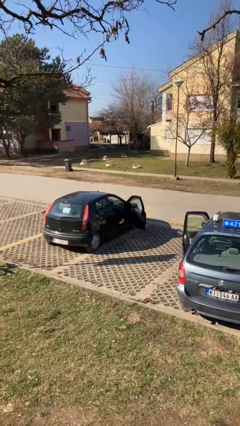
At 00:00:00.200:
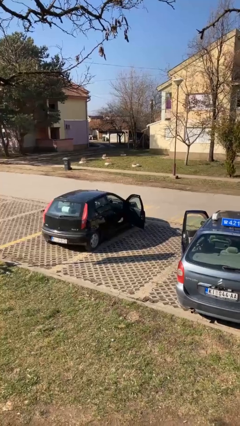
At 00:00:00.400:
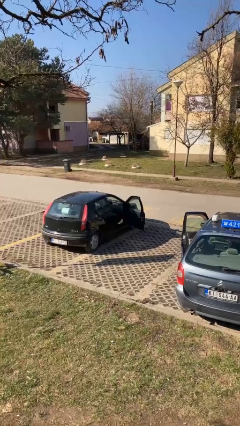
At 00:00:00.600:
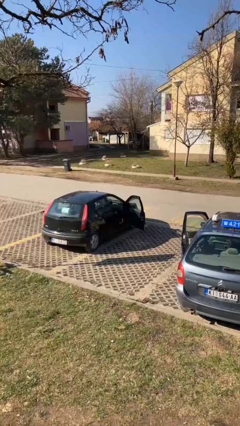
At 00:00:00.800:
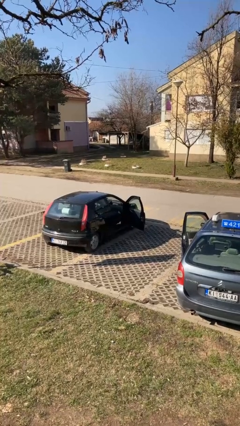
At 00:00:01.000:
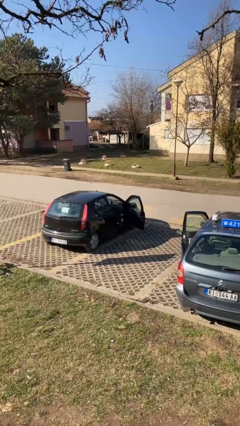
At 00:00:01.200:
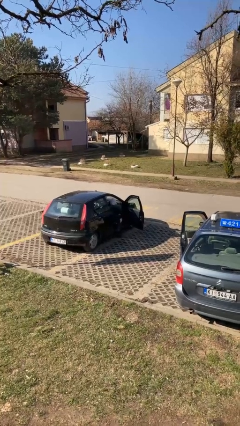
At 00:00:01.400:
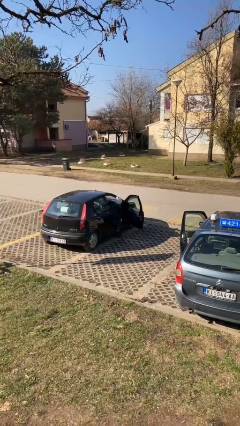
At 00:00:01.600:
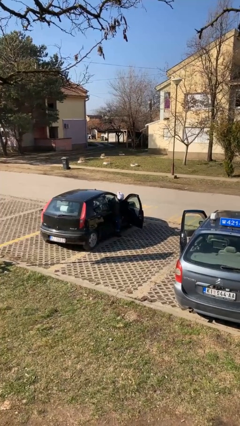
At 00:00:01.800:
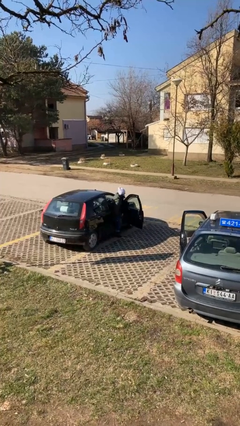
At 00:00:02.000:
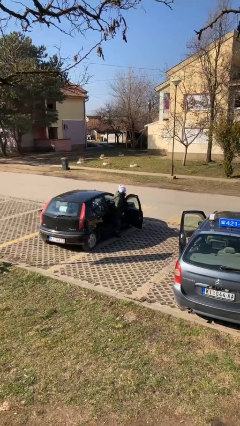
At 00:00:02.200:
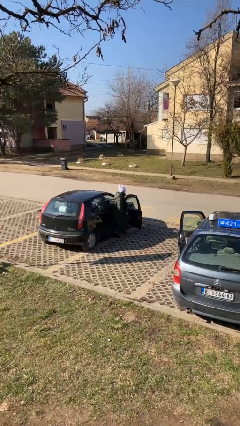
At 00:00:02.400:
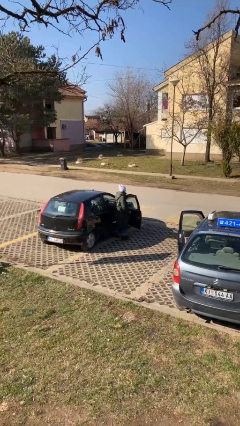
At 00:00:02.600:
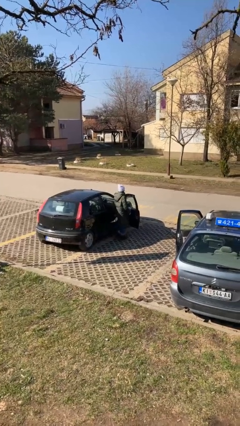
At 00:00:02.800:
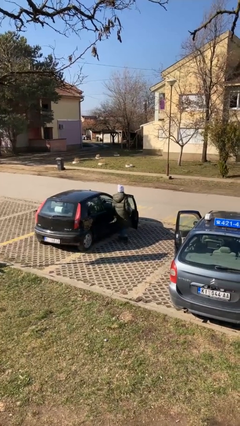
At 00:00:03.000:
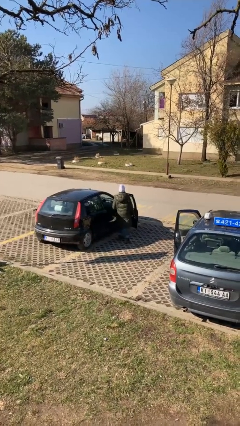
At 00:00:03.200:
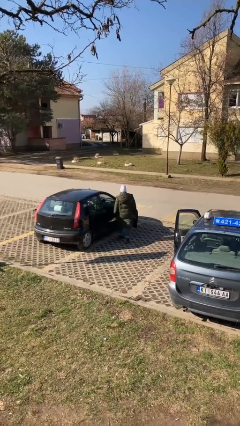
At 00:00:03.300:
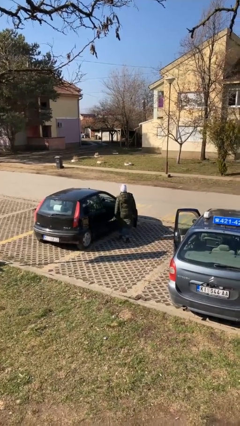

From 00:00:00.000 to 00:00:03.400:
person exits car

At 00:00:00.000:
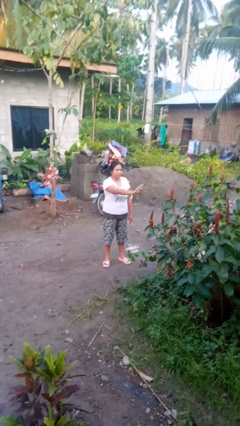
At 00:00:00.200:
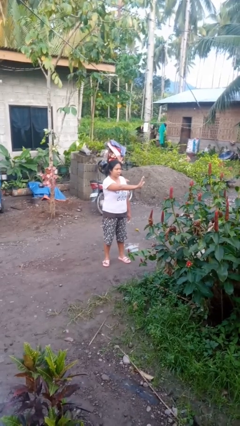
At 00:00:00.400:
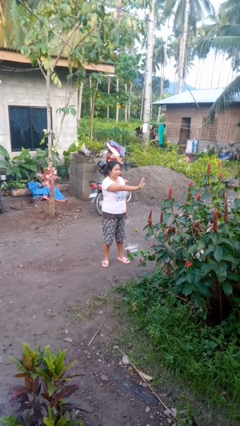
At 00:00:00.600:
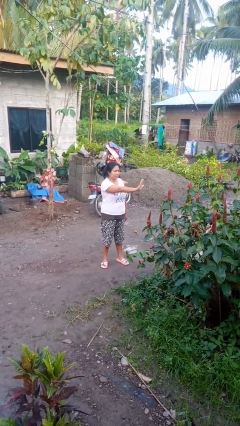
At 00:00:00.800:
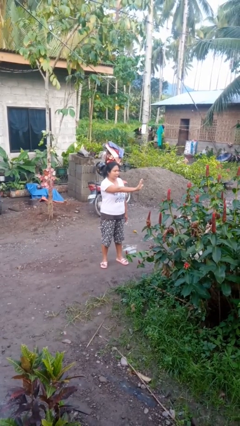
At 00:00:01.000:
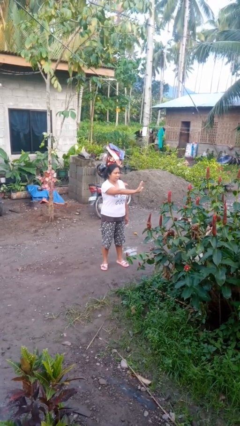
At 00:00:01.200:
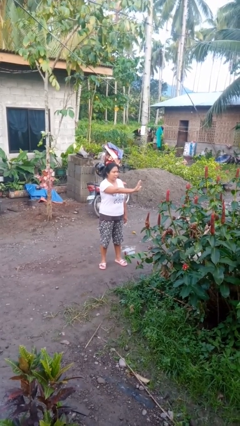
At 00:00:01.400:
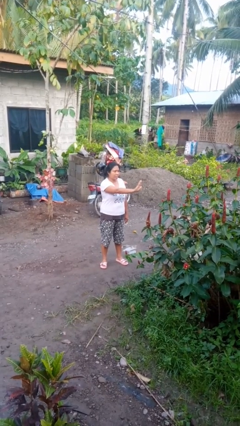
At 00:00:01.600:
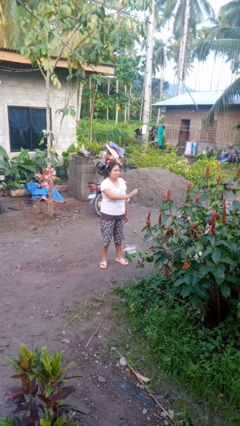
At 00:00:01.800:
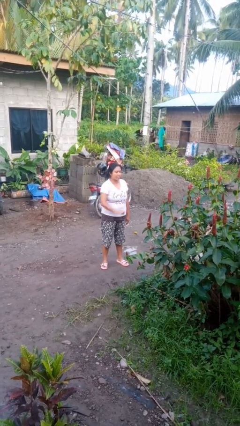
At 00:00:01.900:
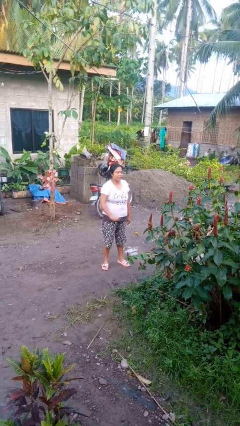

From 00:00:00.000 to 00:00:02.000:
person gestures stop

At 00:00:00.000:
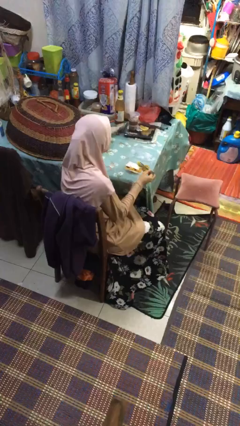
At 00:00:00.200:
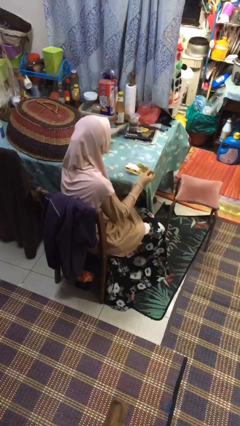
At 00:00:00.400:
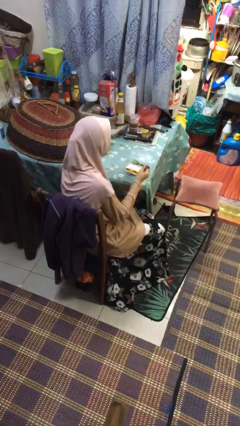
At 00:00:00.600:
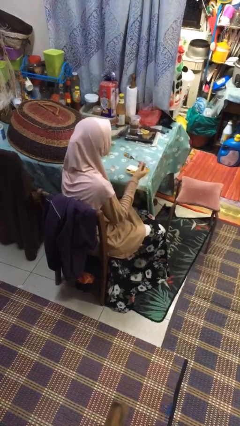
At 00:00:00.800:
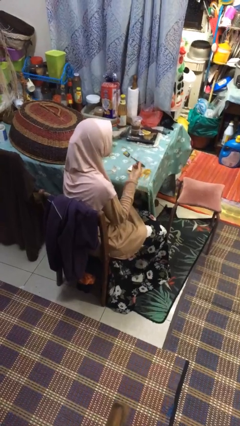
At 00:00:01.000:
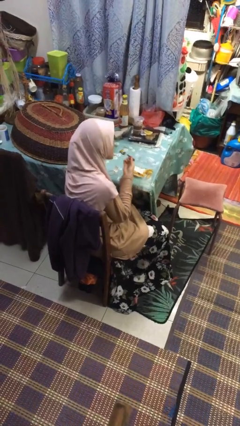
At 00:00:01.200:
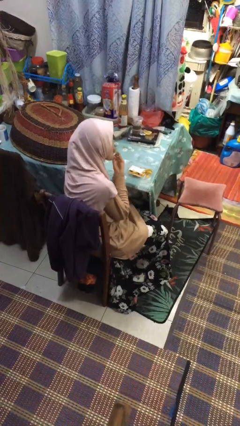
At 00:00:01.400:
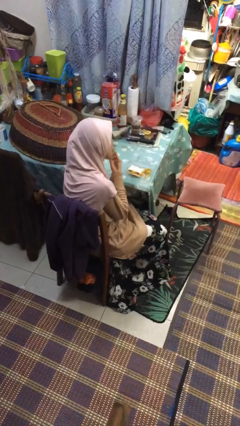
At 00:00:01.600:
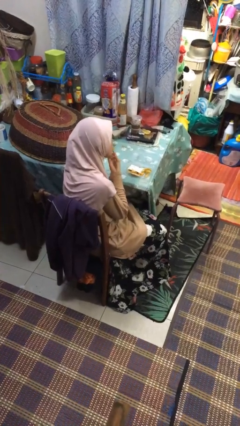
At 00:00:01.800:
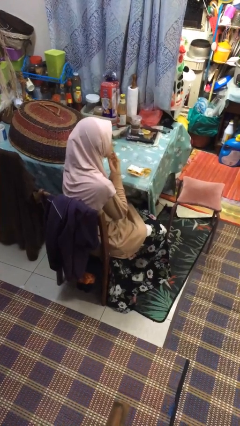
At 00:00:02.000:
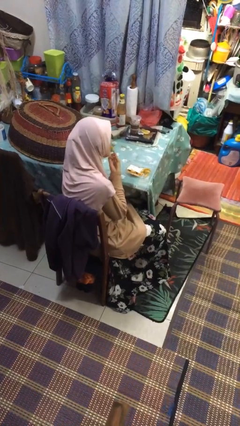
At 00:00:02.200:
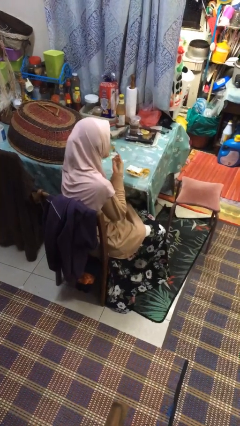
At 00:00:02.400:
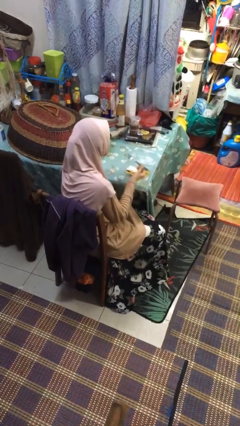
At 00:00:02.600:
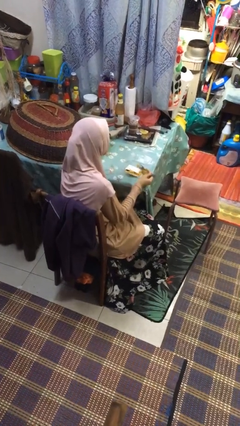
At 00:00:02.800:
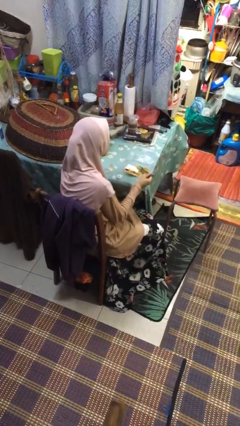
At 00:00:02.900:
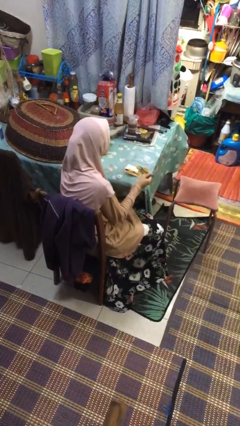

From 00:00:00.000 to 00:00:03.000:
person eats with utensil

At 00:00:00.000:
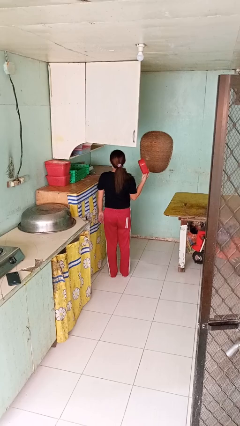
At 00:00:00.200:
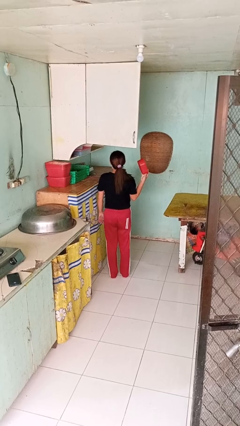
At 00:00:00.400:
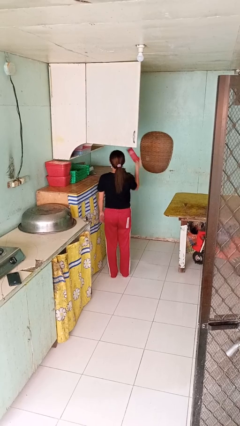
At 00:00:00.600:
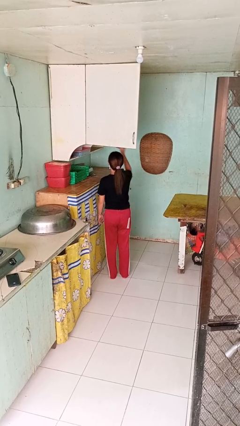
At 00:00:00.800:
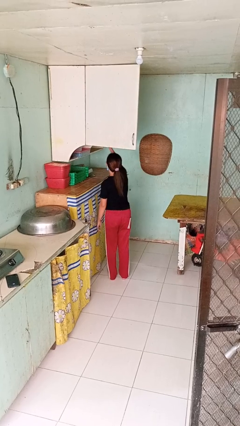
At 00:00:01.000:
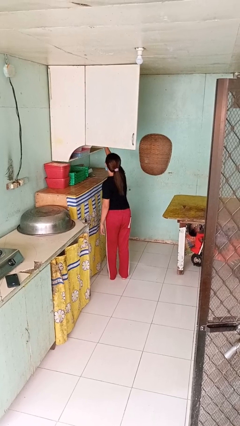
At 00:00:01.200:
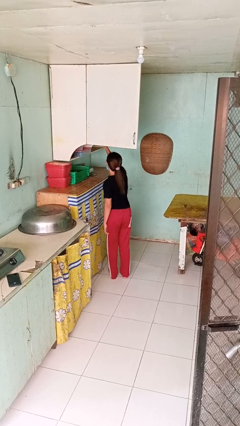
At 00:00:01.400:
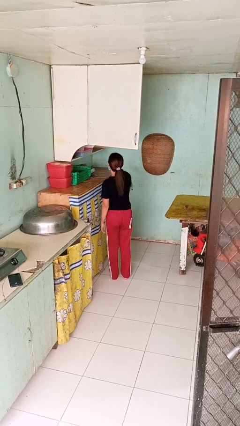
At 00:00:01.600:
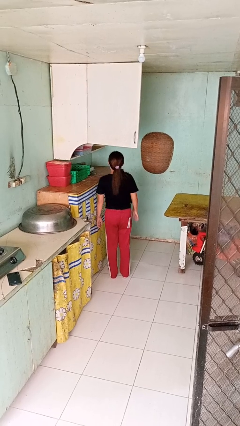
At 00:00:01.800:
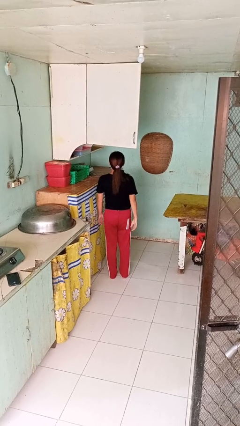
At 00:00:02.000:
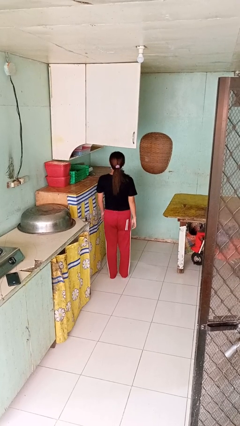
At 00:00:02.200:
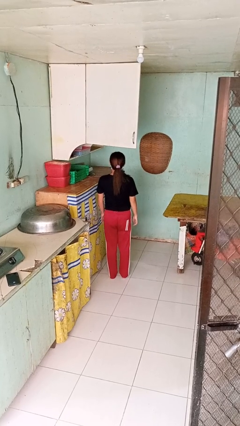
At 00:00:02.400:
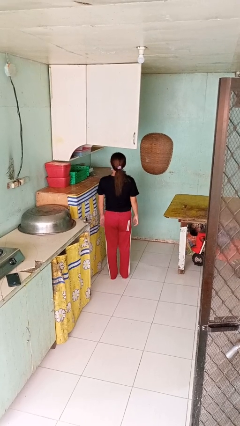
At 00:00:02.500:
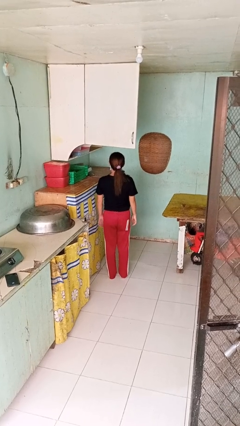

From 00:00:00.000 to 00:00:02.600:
person puts object in cabinet

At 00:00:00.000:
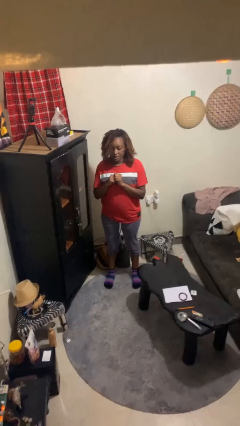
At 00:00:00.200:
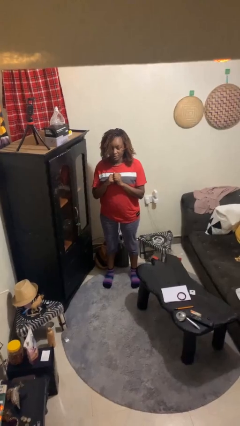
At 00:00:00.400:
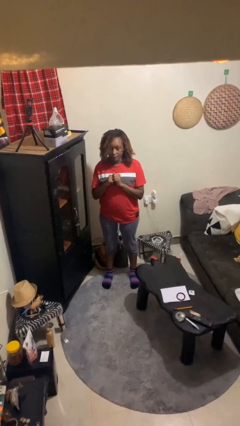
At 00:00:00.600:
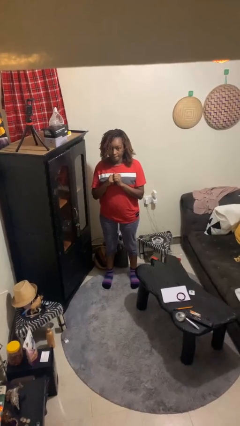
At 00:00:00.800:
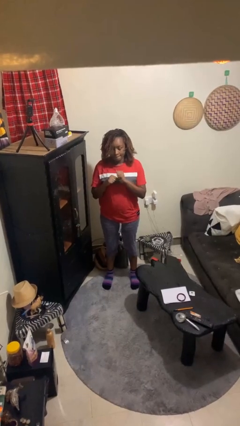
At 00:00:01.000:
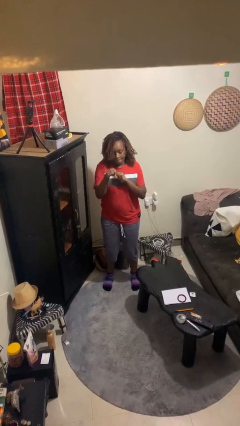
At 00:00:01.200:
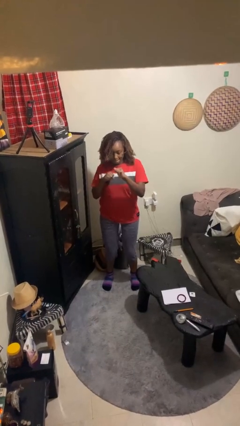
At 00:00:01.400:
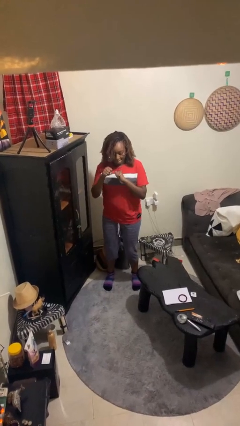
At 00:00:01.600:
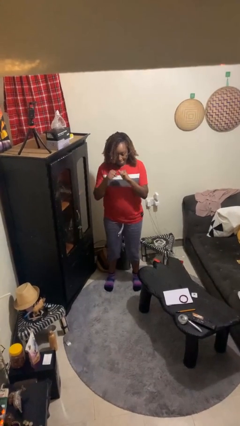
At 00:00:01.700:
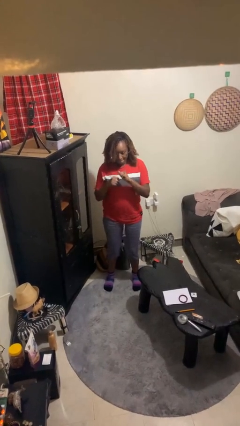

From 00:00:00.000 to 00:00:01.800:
person punches

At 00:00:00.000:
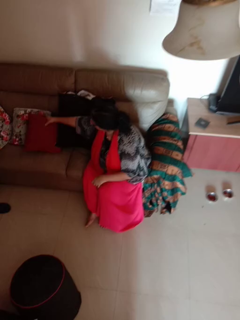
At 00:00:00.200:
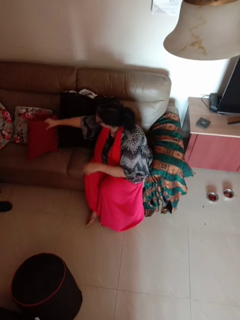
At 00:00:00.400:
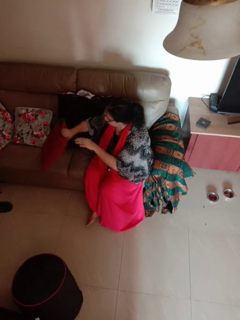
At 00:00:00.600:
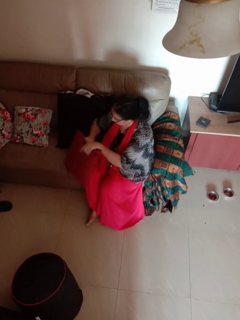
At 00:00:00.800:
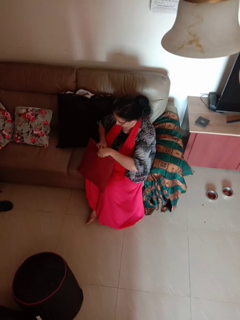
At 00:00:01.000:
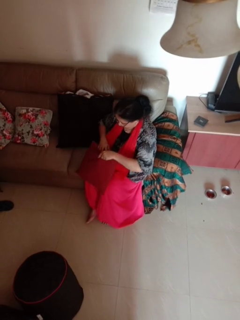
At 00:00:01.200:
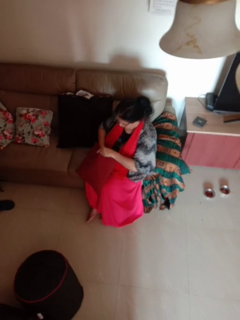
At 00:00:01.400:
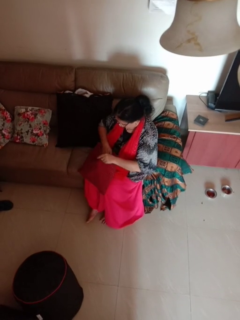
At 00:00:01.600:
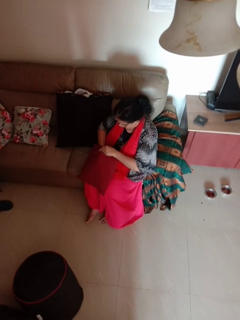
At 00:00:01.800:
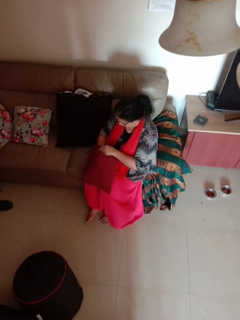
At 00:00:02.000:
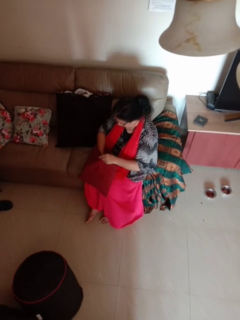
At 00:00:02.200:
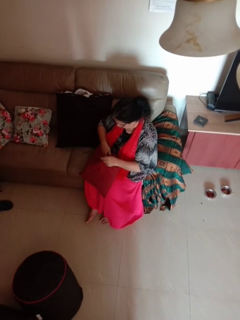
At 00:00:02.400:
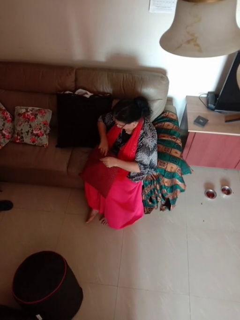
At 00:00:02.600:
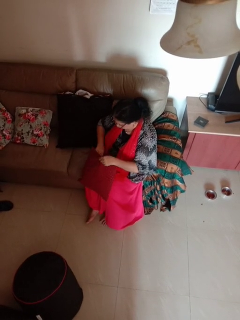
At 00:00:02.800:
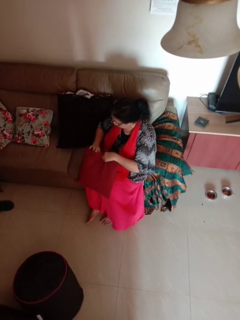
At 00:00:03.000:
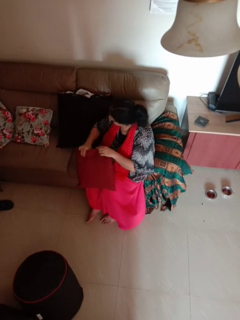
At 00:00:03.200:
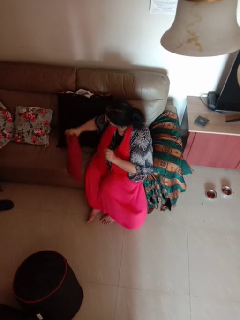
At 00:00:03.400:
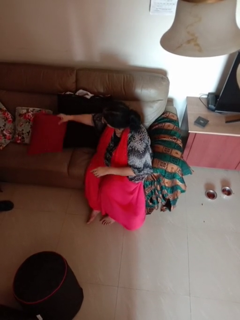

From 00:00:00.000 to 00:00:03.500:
person searches in couch

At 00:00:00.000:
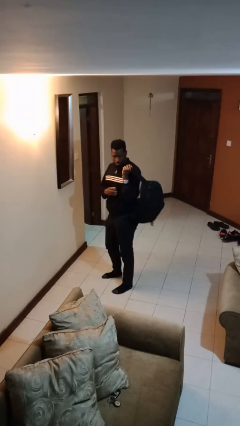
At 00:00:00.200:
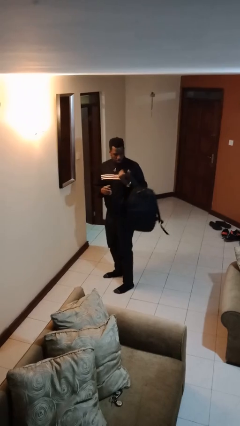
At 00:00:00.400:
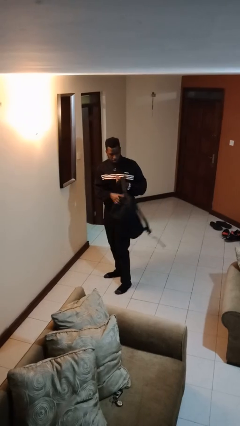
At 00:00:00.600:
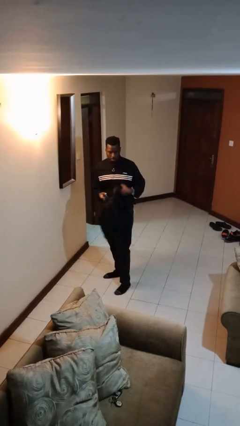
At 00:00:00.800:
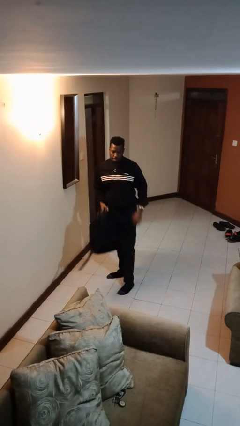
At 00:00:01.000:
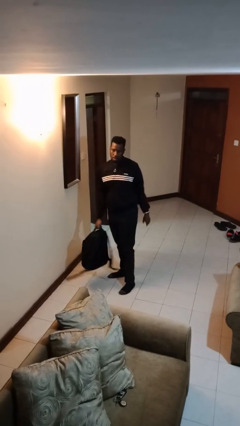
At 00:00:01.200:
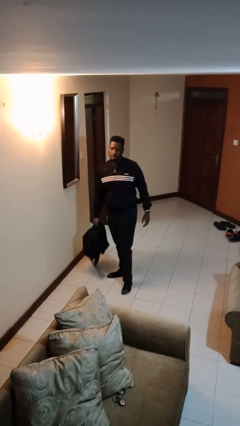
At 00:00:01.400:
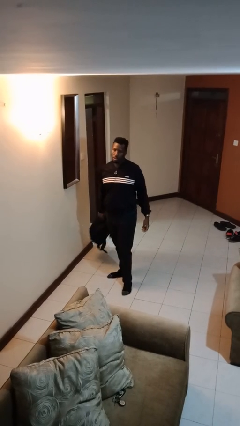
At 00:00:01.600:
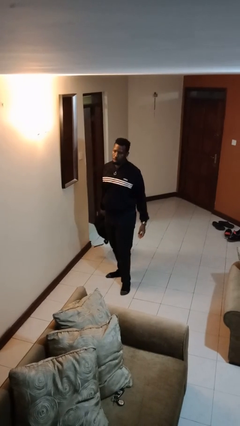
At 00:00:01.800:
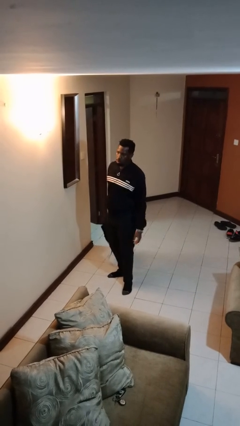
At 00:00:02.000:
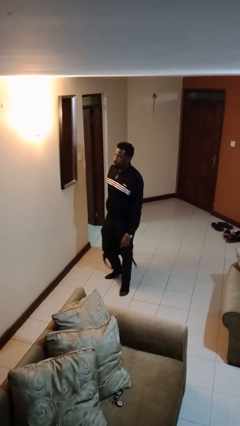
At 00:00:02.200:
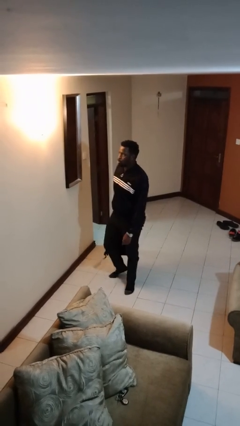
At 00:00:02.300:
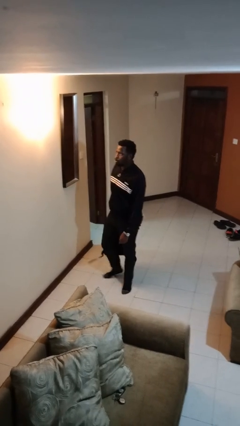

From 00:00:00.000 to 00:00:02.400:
person takes off backpack
